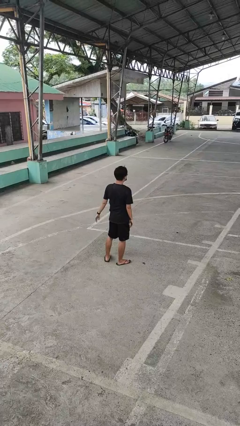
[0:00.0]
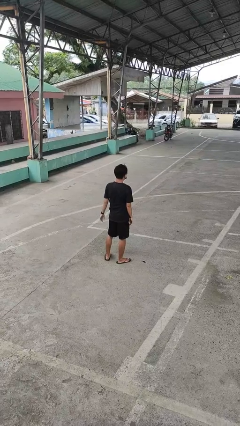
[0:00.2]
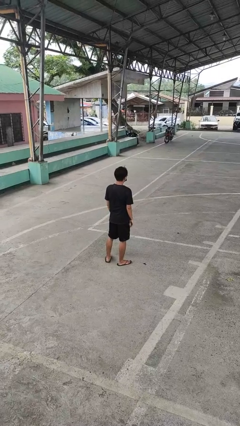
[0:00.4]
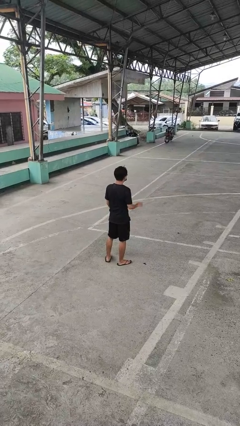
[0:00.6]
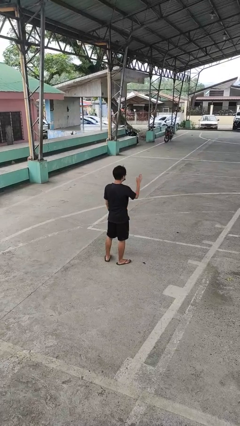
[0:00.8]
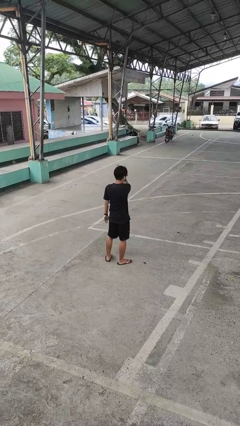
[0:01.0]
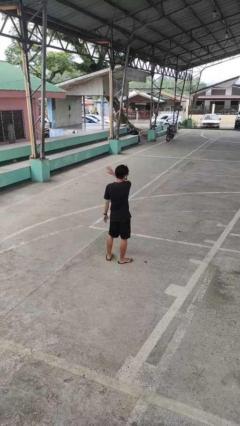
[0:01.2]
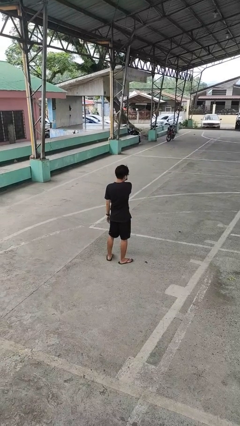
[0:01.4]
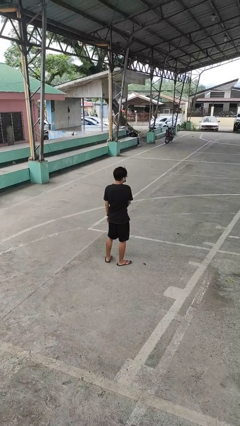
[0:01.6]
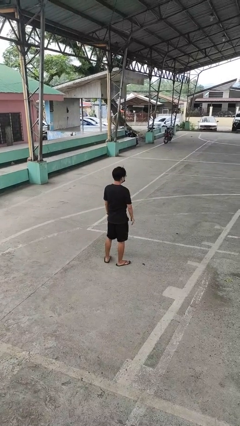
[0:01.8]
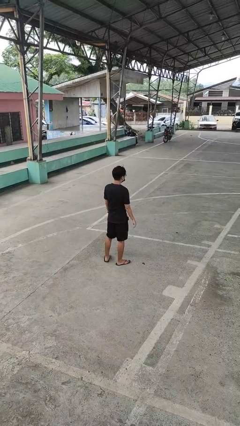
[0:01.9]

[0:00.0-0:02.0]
person gestures swipe left

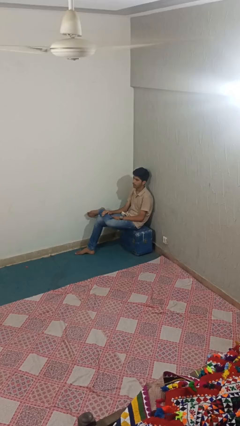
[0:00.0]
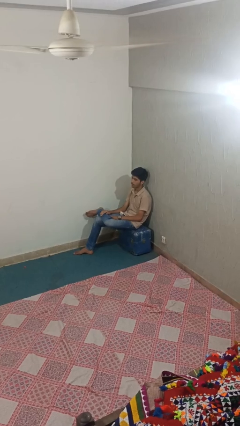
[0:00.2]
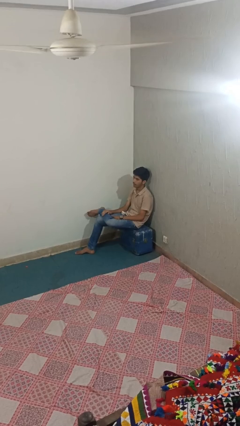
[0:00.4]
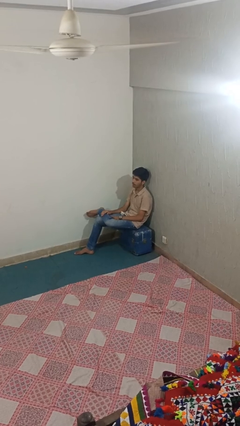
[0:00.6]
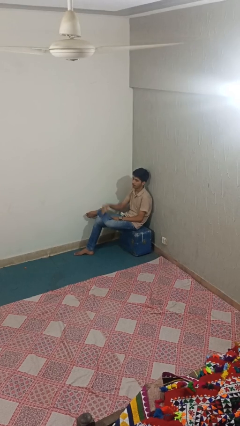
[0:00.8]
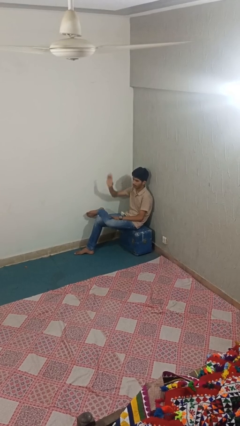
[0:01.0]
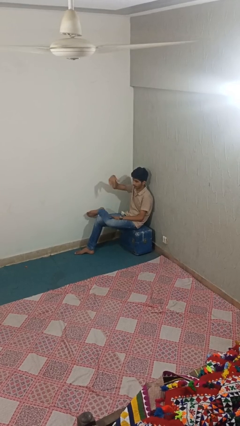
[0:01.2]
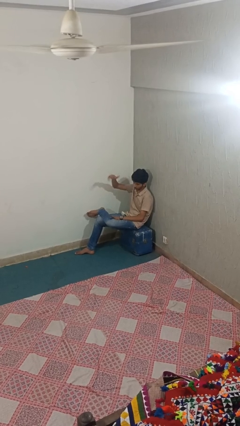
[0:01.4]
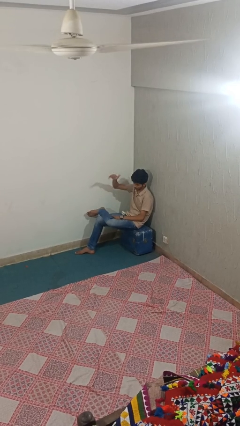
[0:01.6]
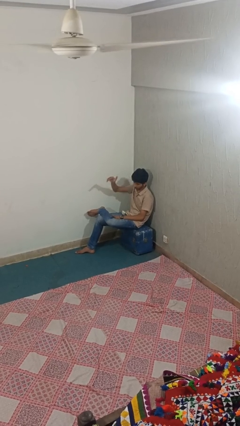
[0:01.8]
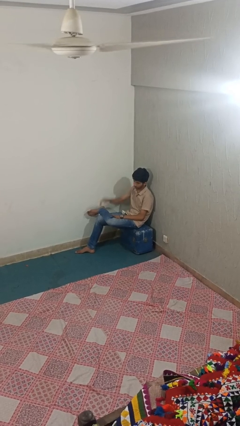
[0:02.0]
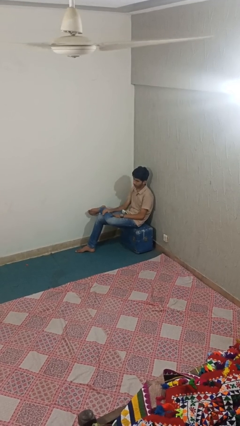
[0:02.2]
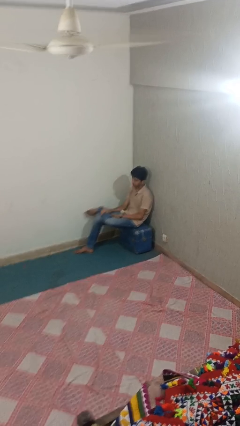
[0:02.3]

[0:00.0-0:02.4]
person gestures come here

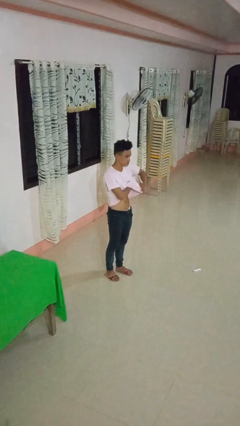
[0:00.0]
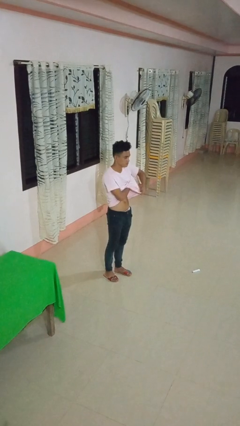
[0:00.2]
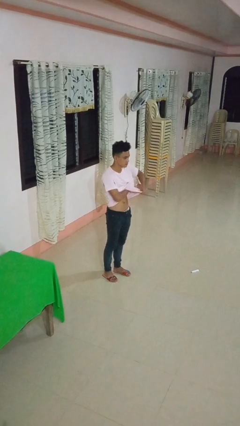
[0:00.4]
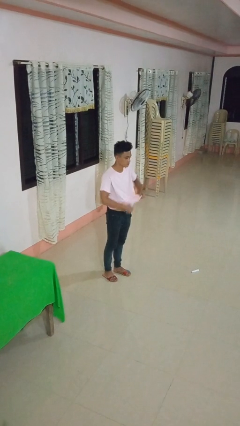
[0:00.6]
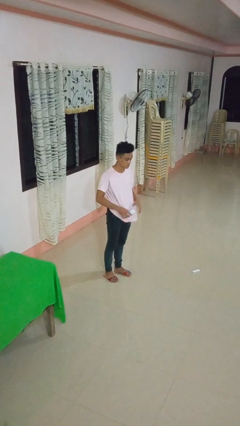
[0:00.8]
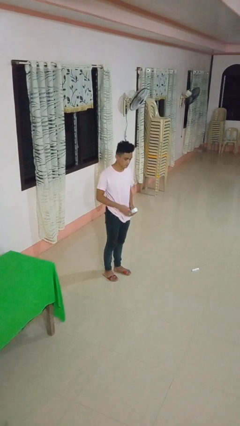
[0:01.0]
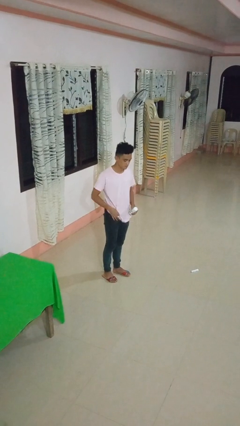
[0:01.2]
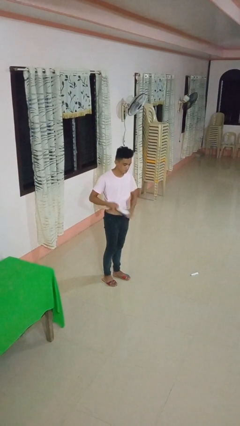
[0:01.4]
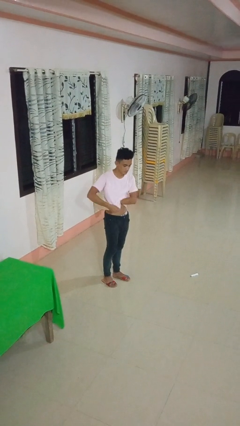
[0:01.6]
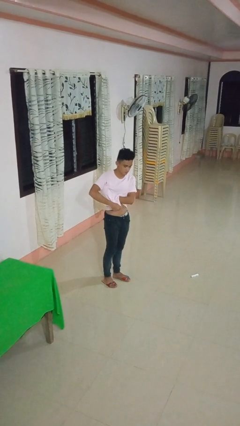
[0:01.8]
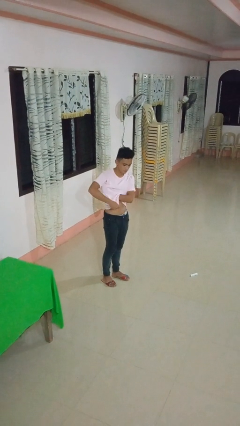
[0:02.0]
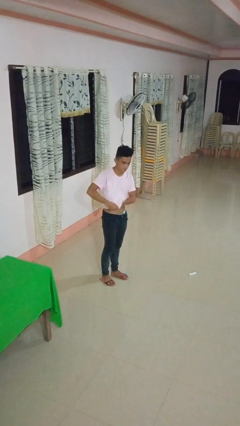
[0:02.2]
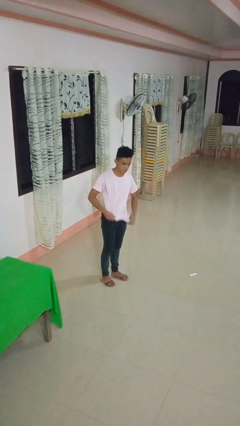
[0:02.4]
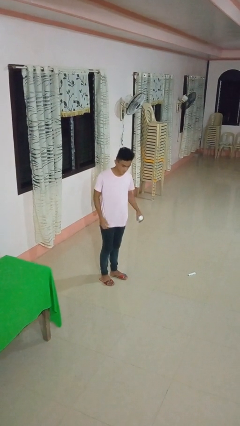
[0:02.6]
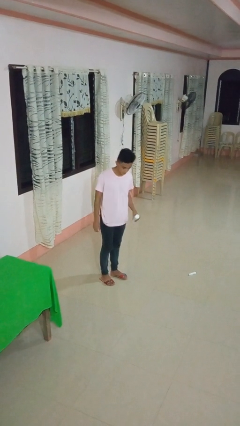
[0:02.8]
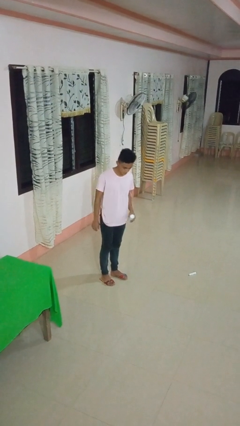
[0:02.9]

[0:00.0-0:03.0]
person applies deodorant

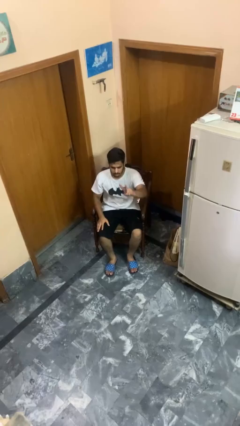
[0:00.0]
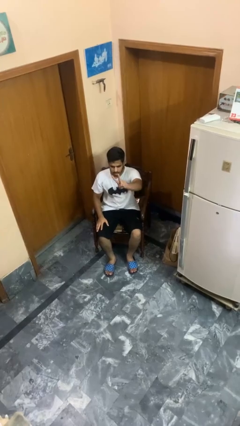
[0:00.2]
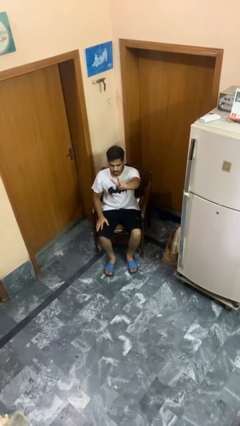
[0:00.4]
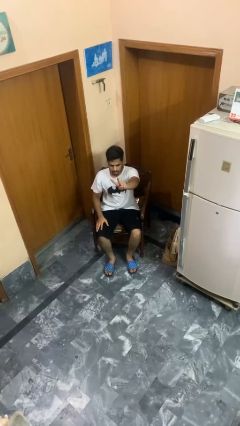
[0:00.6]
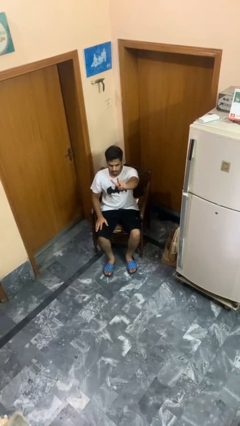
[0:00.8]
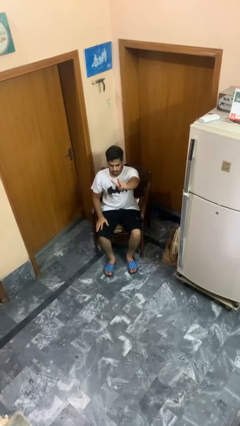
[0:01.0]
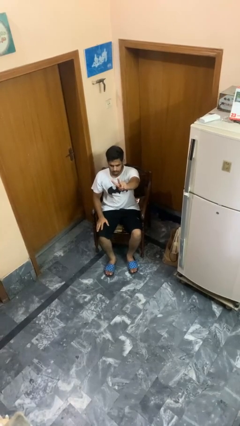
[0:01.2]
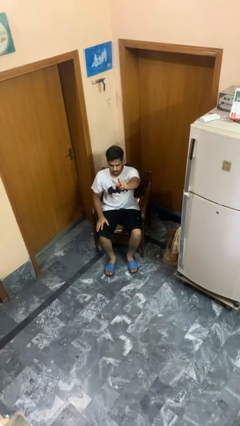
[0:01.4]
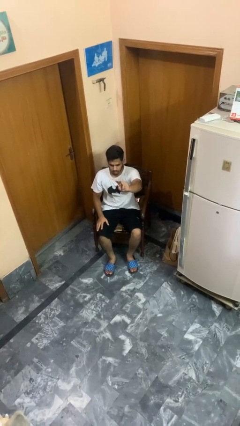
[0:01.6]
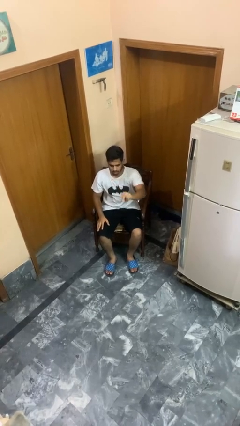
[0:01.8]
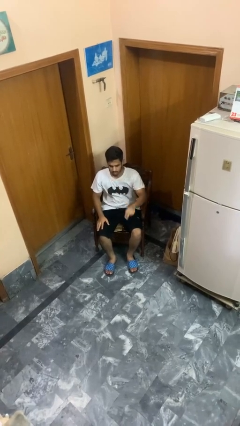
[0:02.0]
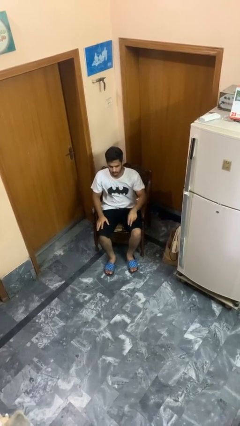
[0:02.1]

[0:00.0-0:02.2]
person gestures peace

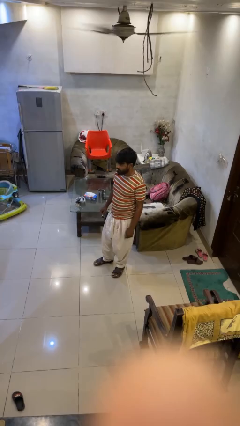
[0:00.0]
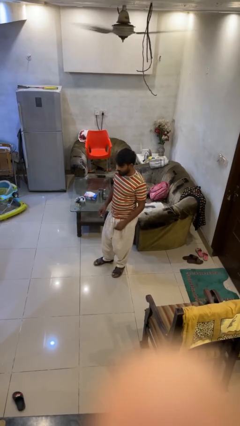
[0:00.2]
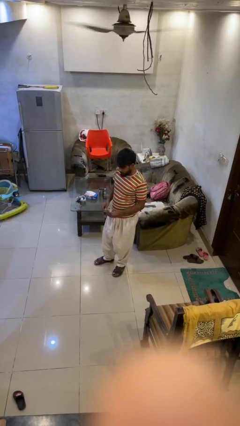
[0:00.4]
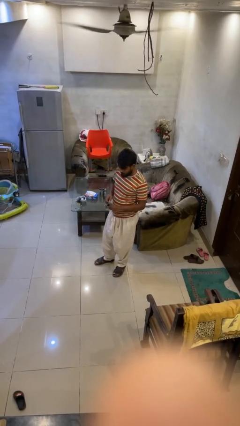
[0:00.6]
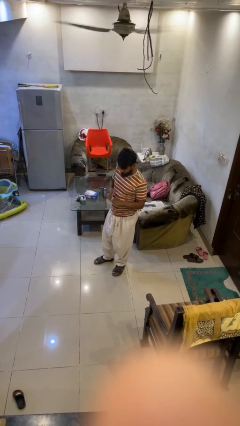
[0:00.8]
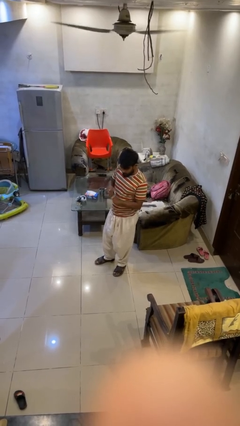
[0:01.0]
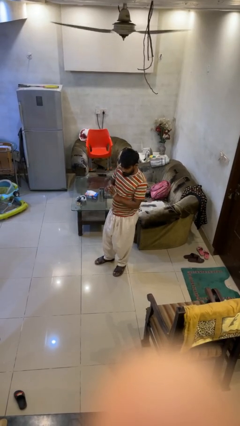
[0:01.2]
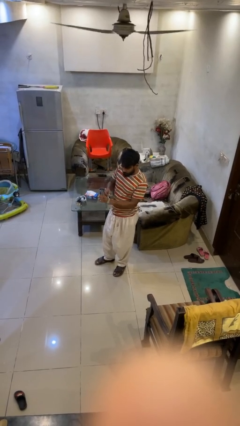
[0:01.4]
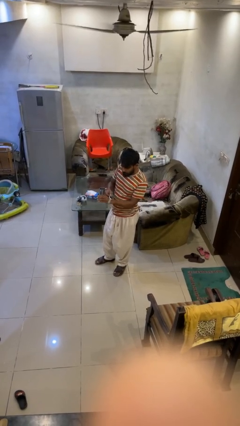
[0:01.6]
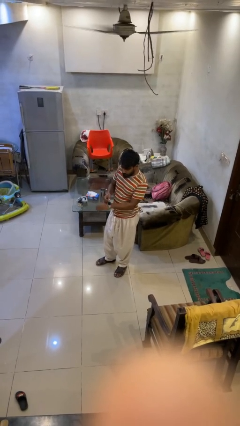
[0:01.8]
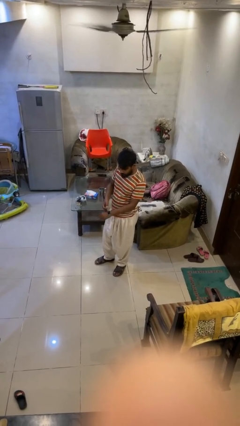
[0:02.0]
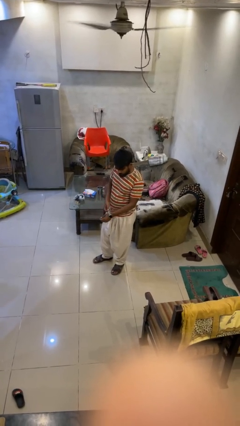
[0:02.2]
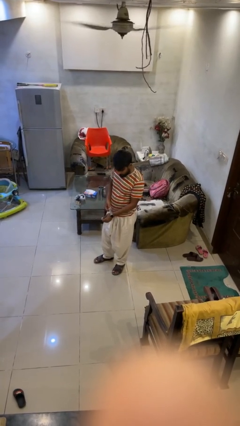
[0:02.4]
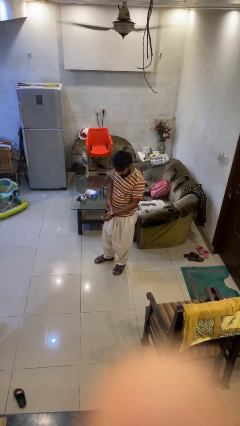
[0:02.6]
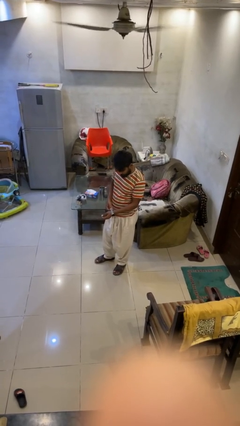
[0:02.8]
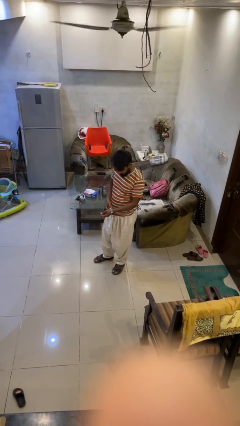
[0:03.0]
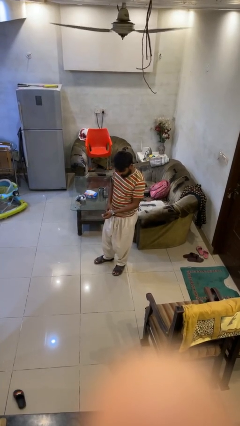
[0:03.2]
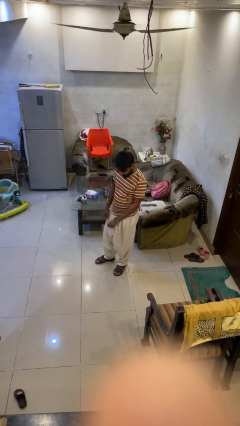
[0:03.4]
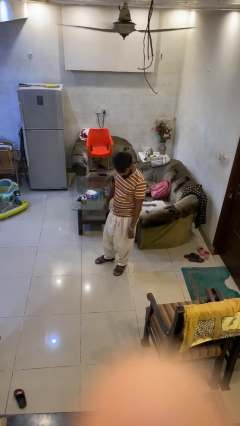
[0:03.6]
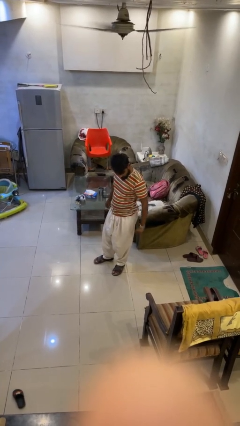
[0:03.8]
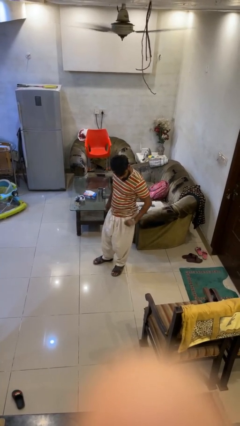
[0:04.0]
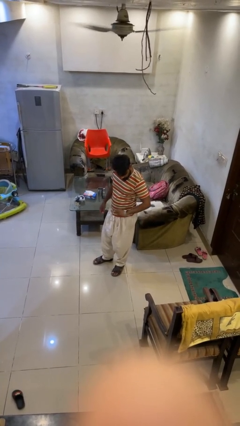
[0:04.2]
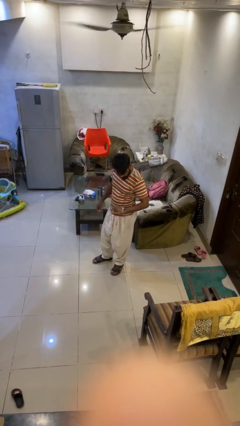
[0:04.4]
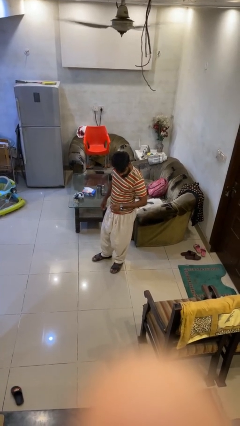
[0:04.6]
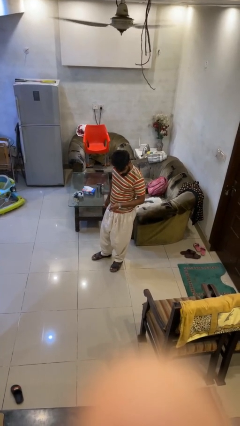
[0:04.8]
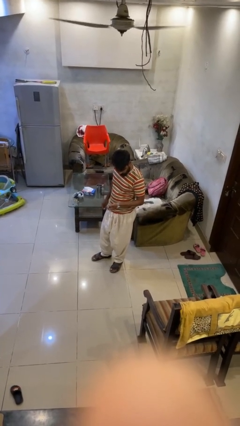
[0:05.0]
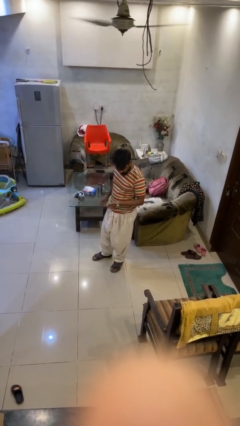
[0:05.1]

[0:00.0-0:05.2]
person puts on wristwatch

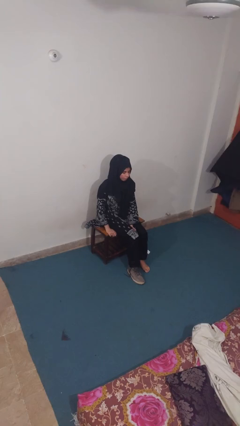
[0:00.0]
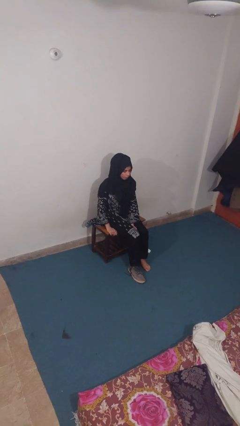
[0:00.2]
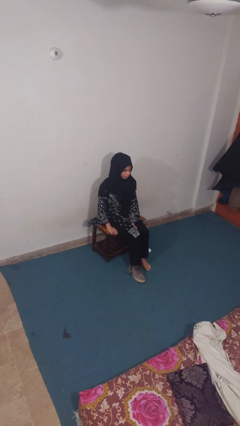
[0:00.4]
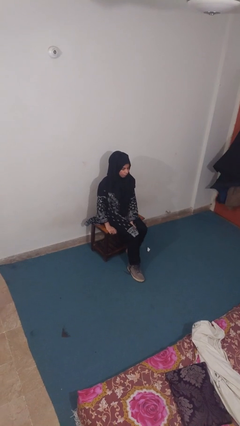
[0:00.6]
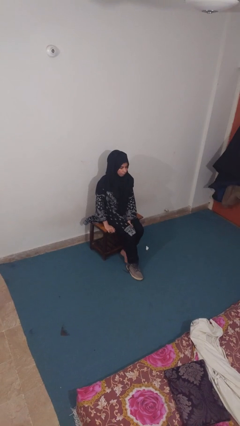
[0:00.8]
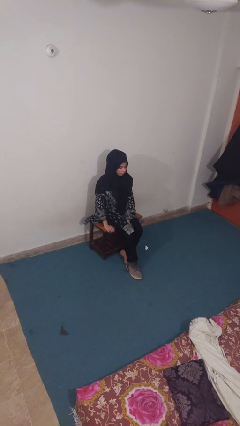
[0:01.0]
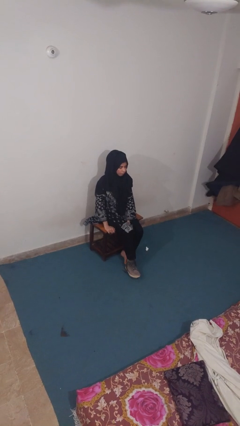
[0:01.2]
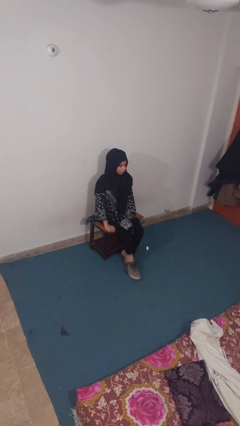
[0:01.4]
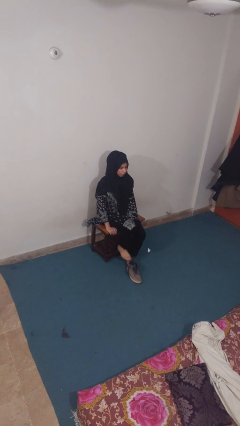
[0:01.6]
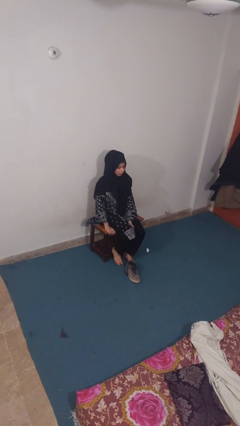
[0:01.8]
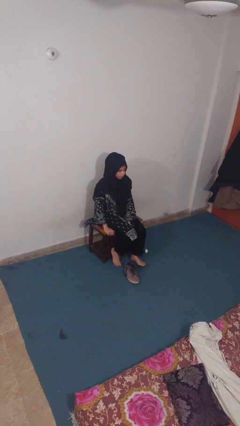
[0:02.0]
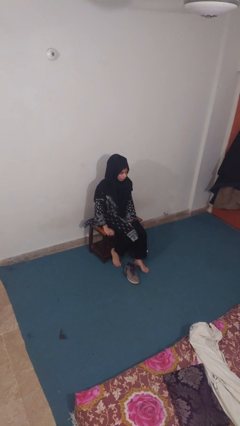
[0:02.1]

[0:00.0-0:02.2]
person takes off boots

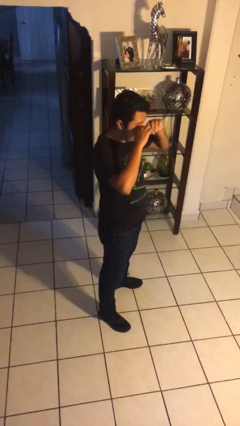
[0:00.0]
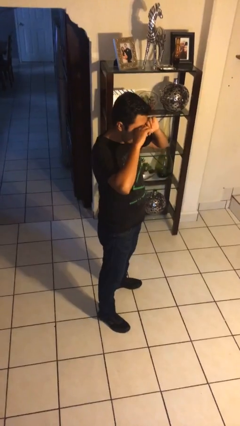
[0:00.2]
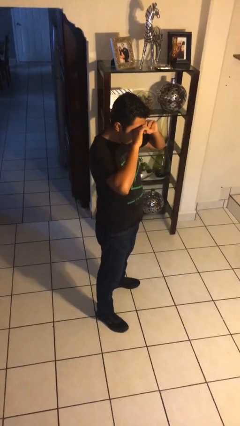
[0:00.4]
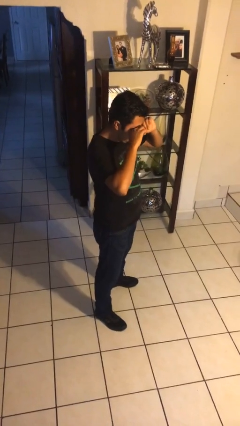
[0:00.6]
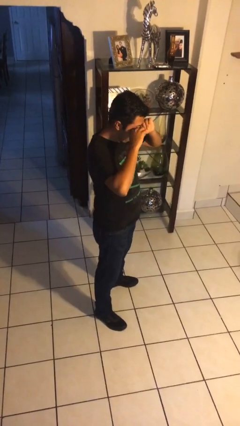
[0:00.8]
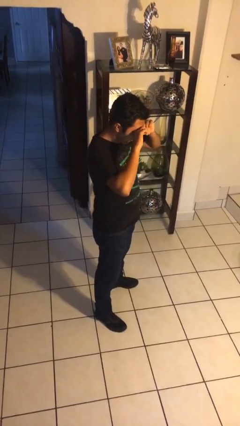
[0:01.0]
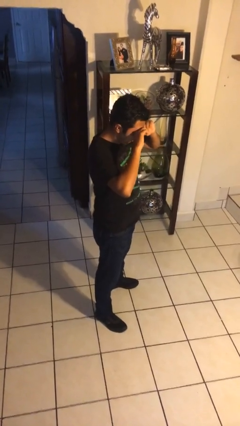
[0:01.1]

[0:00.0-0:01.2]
person rubs eyes
